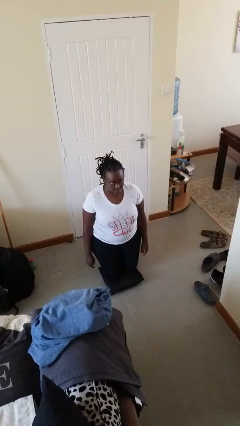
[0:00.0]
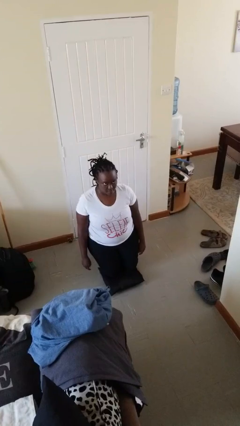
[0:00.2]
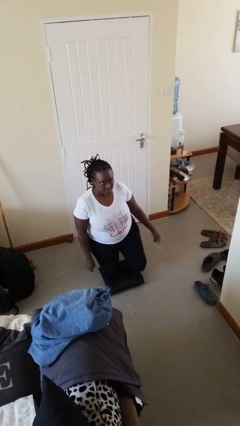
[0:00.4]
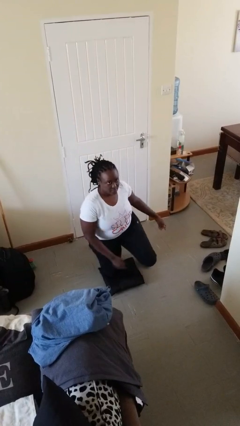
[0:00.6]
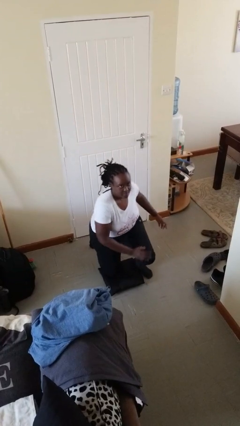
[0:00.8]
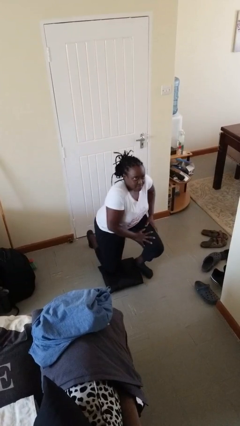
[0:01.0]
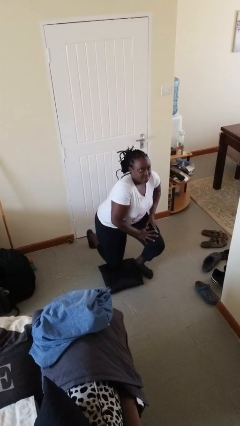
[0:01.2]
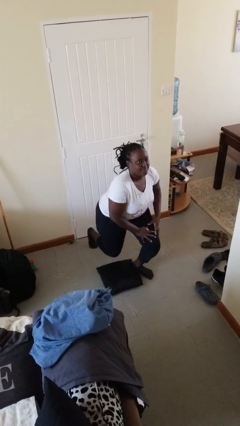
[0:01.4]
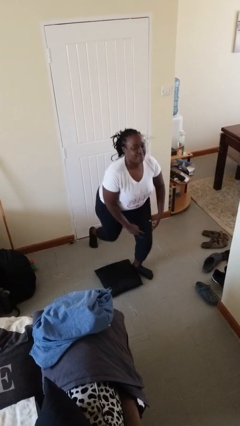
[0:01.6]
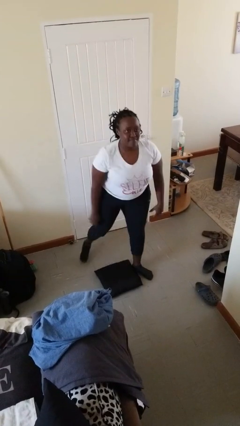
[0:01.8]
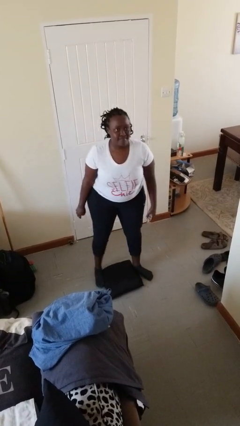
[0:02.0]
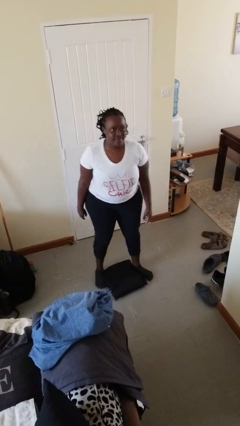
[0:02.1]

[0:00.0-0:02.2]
person stands up from floor

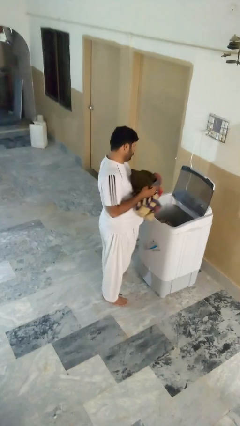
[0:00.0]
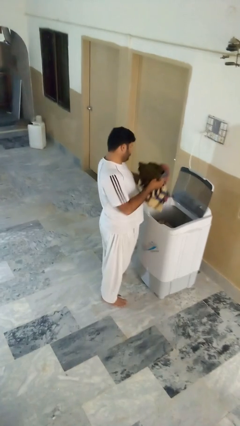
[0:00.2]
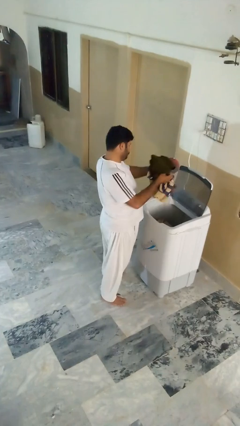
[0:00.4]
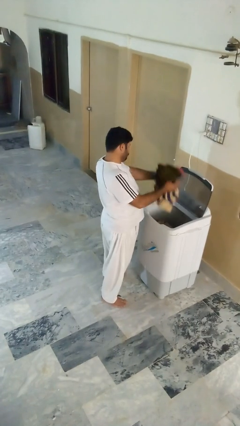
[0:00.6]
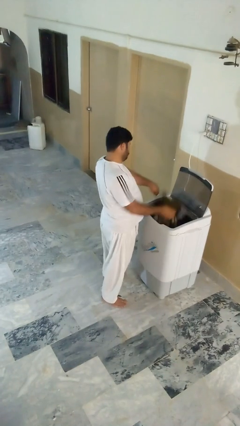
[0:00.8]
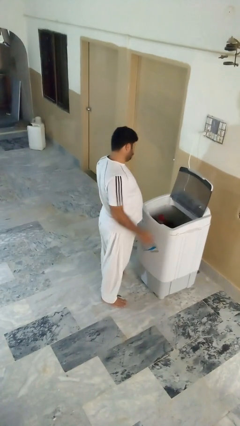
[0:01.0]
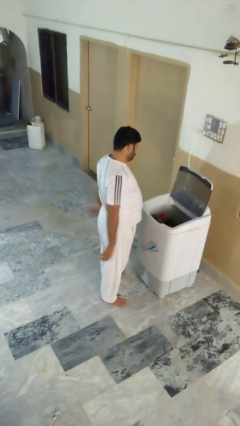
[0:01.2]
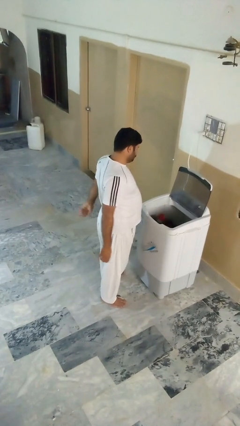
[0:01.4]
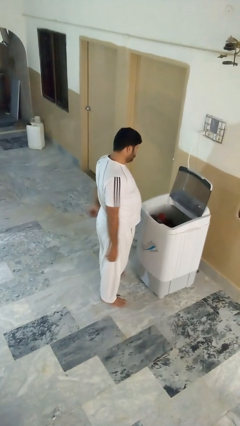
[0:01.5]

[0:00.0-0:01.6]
person loads clotheswasher

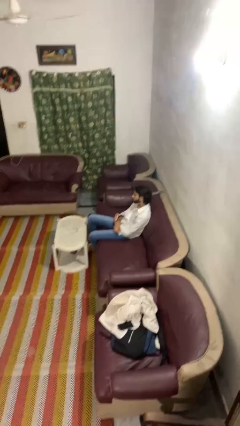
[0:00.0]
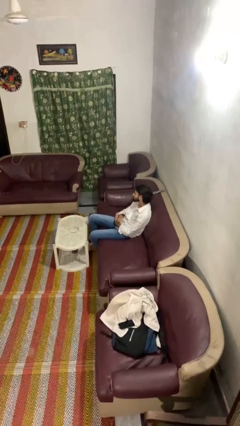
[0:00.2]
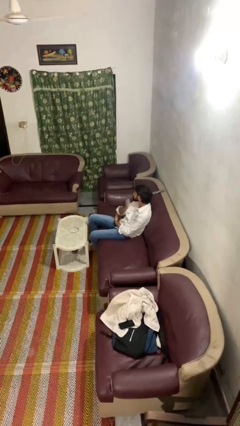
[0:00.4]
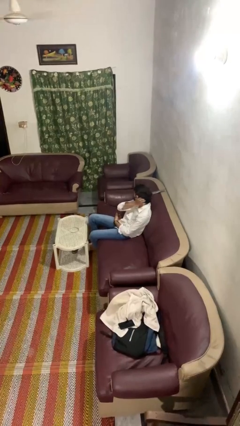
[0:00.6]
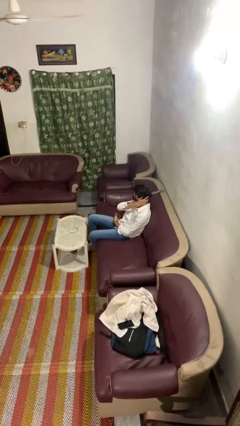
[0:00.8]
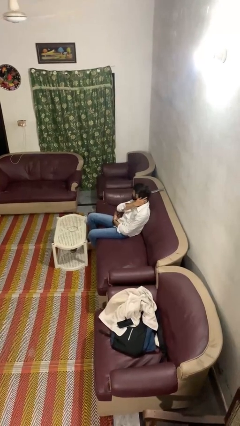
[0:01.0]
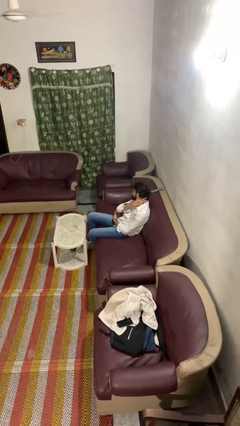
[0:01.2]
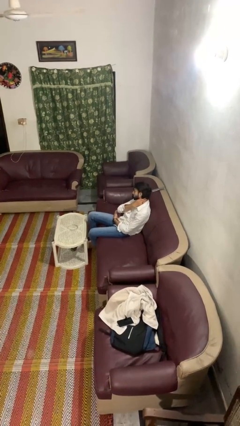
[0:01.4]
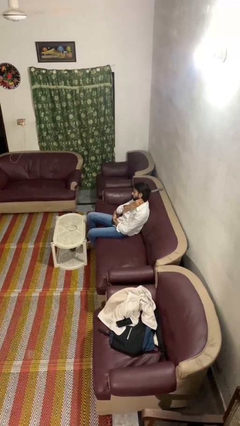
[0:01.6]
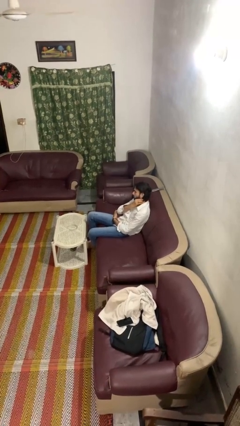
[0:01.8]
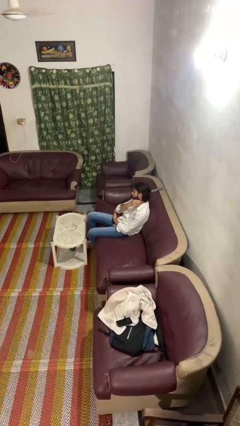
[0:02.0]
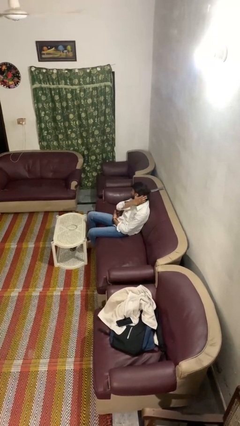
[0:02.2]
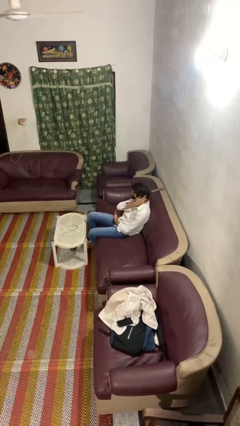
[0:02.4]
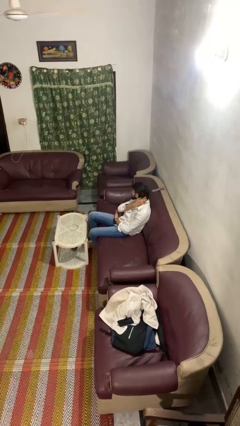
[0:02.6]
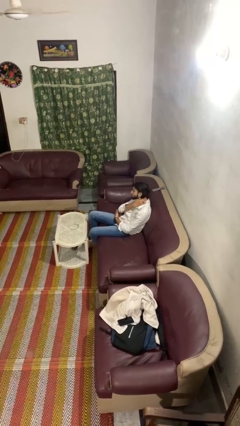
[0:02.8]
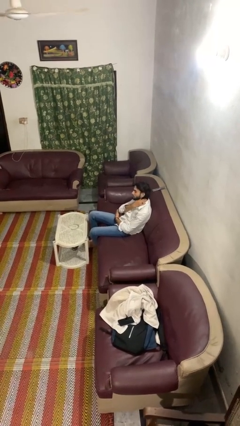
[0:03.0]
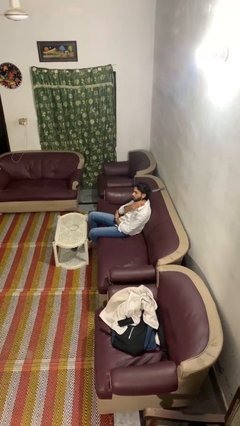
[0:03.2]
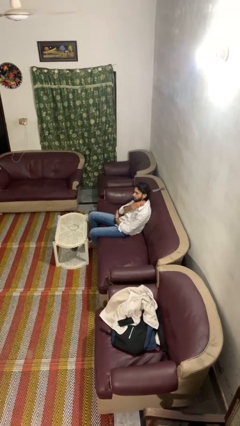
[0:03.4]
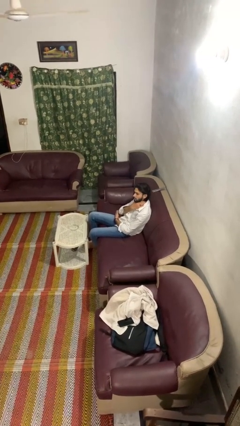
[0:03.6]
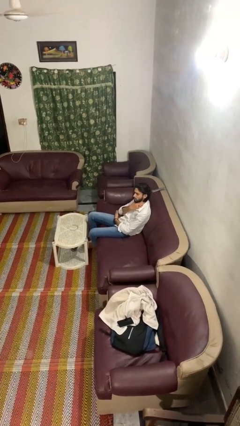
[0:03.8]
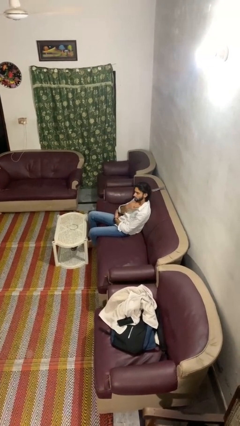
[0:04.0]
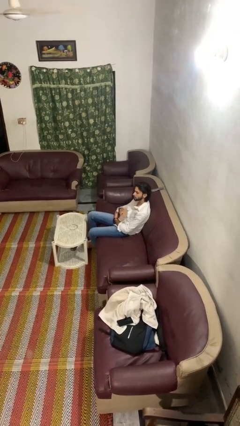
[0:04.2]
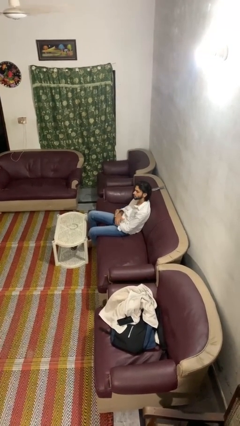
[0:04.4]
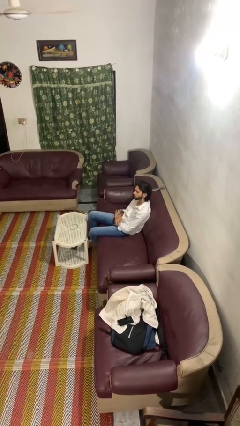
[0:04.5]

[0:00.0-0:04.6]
person strokes hair

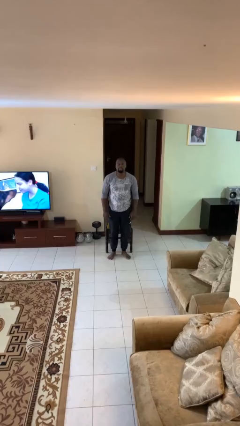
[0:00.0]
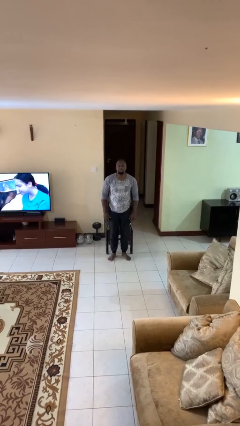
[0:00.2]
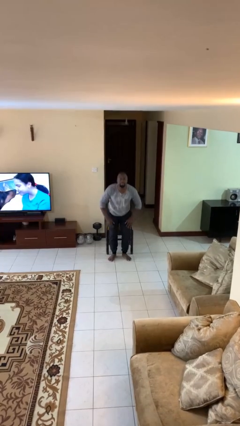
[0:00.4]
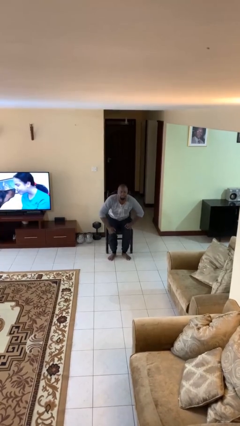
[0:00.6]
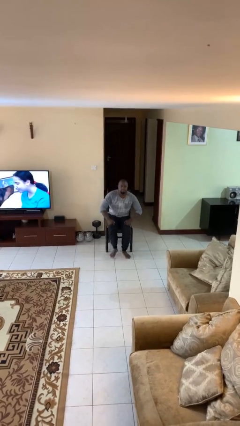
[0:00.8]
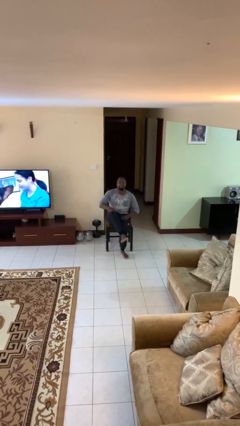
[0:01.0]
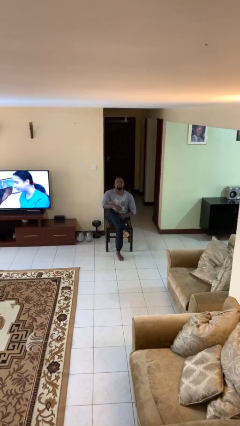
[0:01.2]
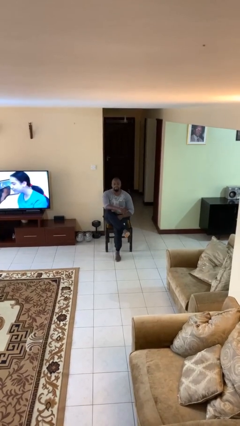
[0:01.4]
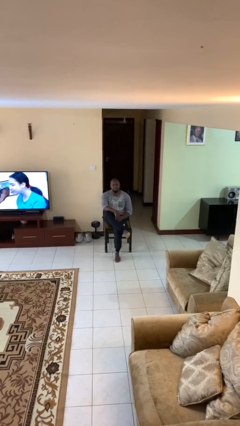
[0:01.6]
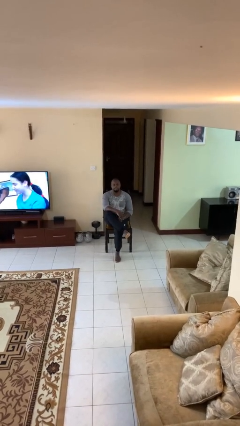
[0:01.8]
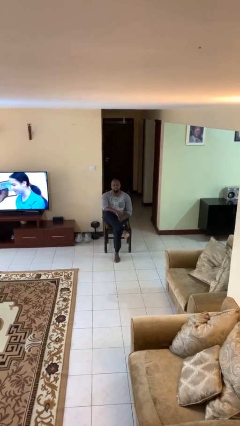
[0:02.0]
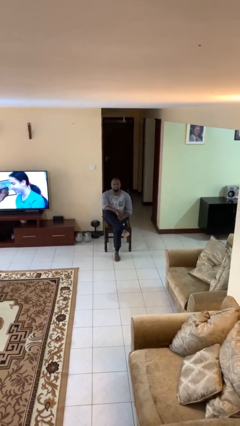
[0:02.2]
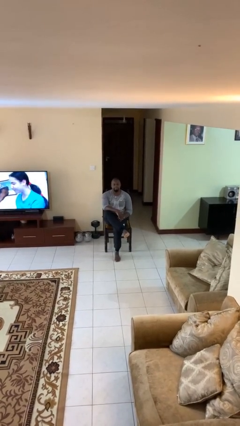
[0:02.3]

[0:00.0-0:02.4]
person sits down

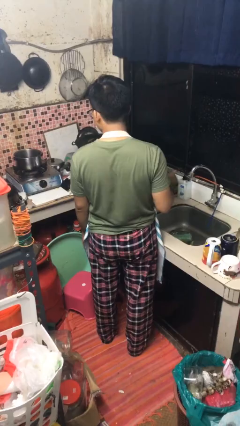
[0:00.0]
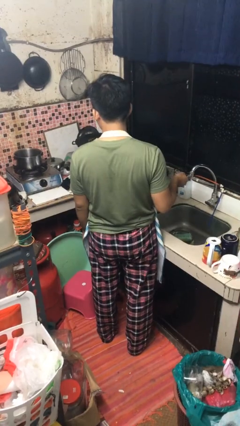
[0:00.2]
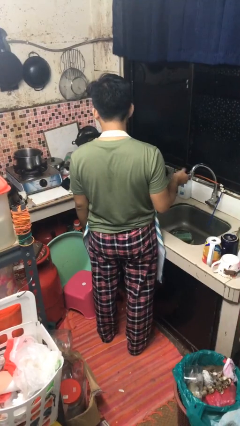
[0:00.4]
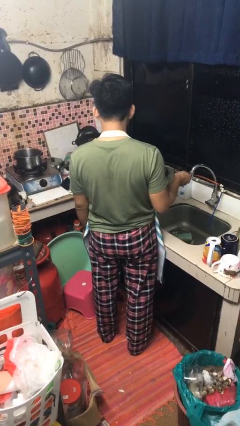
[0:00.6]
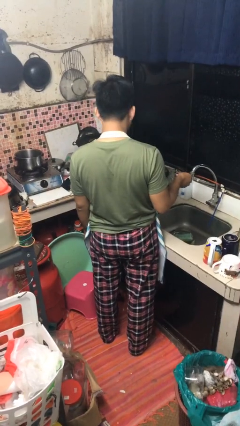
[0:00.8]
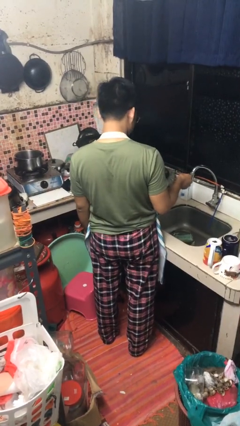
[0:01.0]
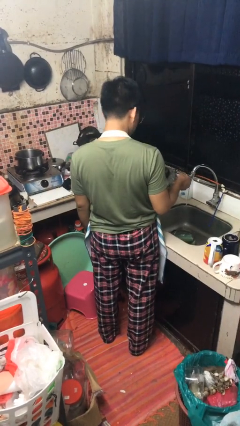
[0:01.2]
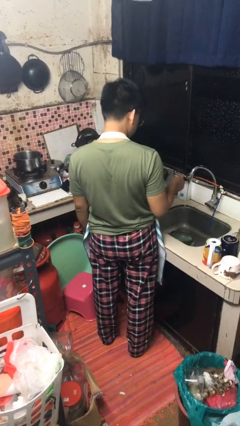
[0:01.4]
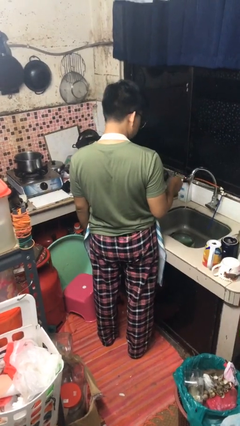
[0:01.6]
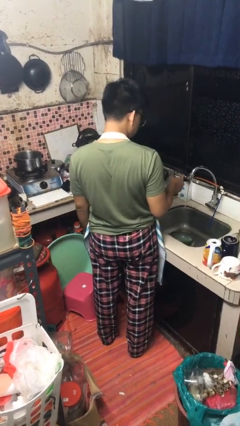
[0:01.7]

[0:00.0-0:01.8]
person turns on faucet

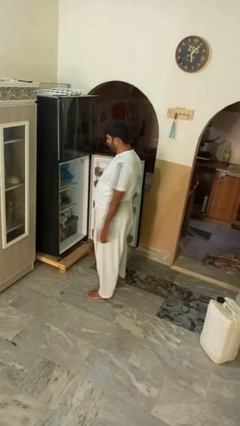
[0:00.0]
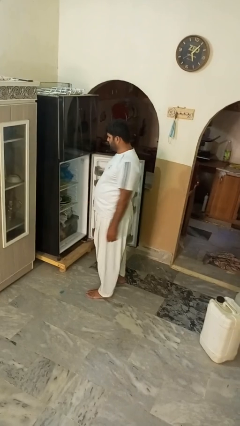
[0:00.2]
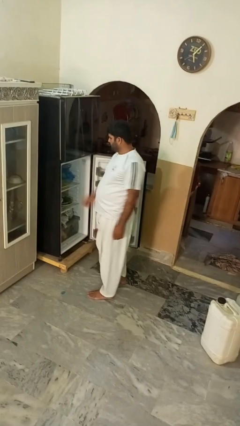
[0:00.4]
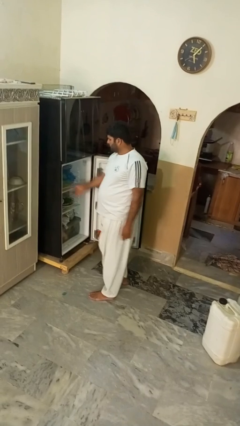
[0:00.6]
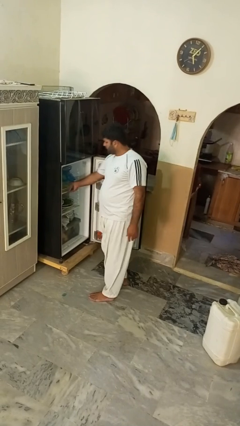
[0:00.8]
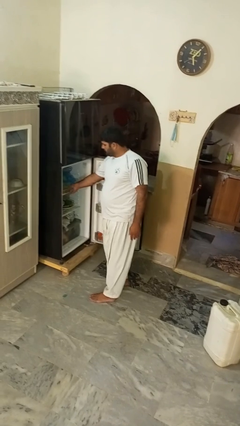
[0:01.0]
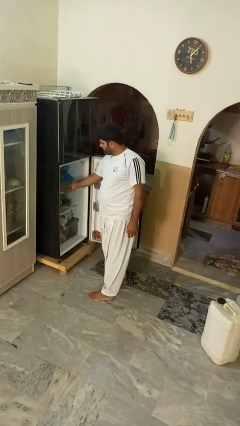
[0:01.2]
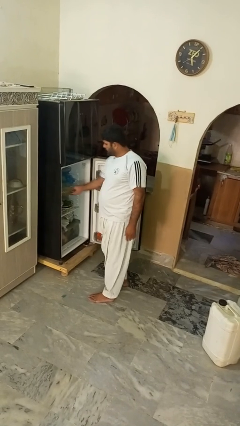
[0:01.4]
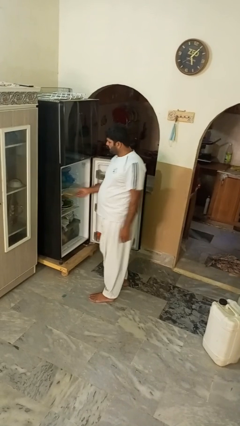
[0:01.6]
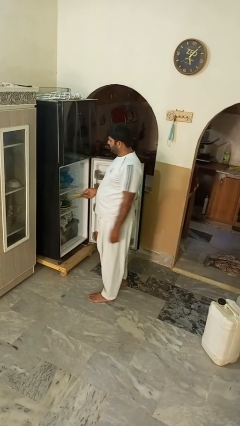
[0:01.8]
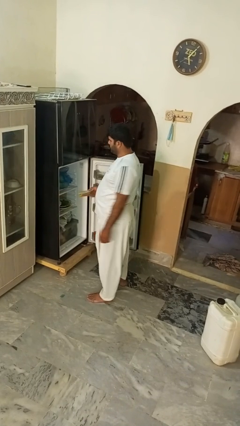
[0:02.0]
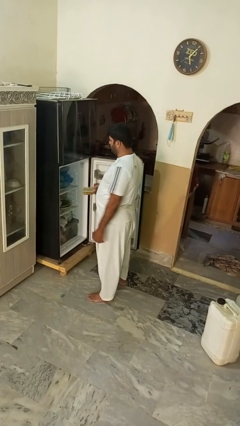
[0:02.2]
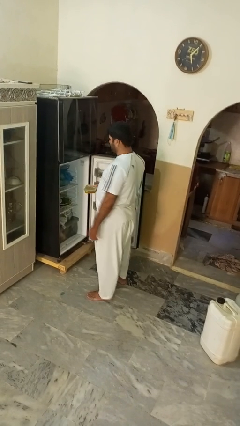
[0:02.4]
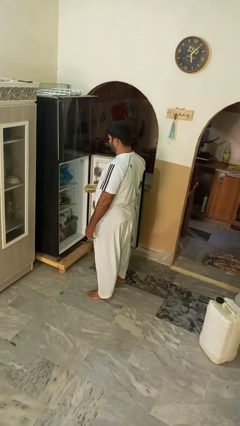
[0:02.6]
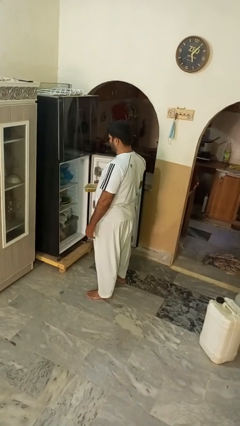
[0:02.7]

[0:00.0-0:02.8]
person takes object from refrigerator

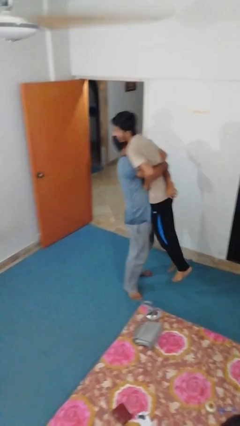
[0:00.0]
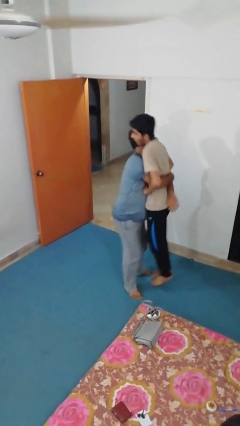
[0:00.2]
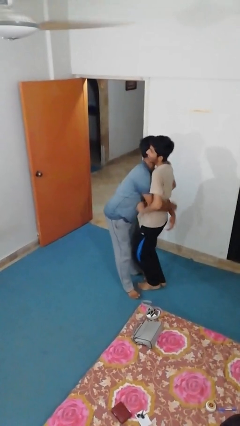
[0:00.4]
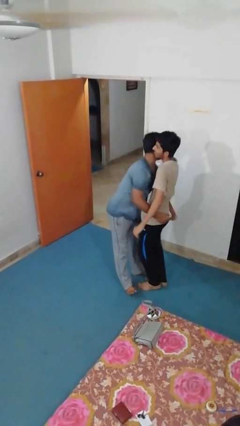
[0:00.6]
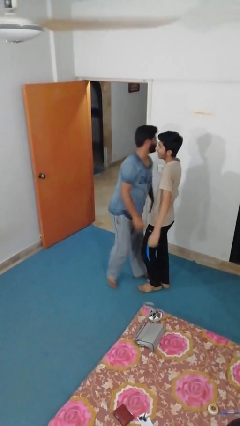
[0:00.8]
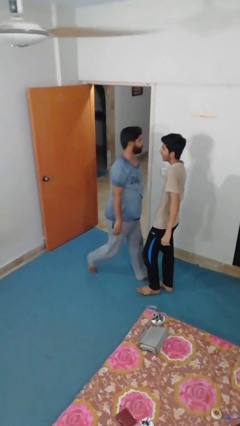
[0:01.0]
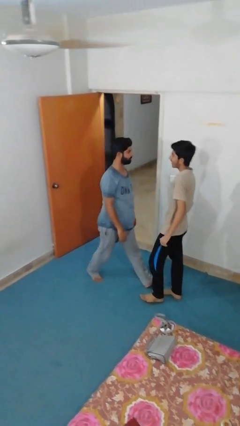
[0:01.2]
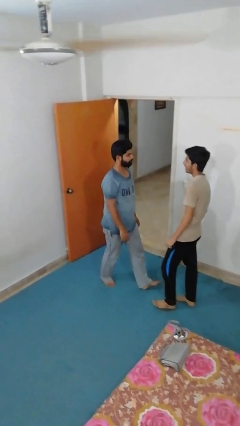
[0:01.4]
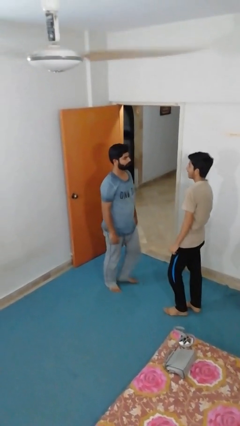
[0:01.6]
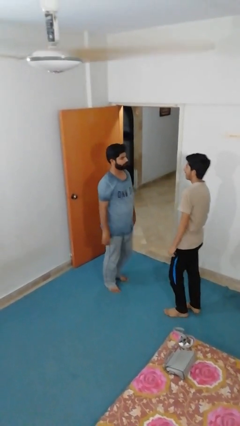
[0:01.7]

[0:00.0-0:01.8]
person puts down person
